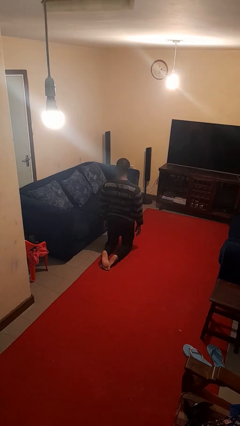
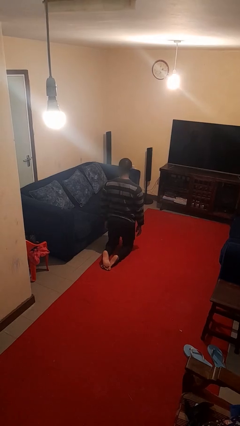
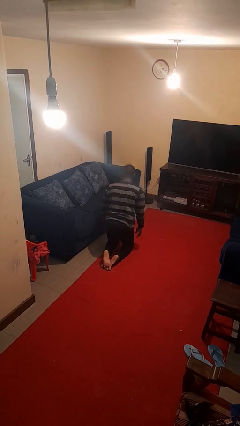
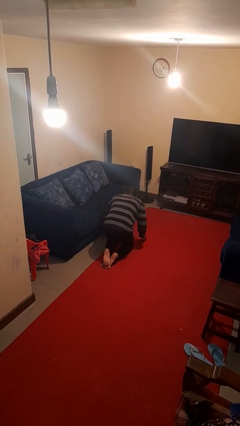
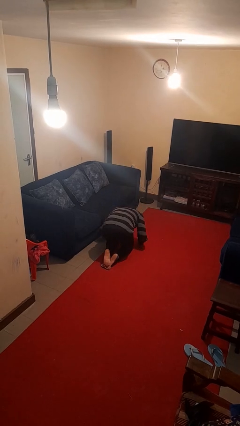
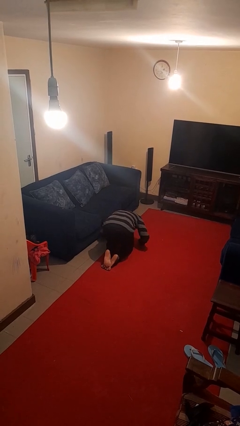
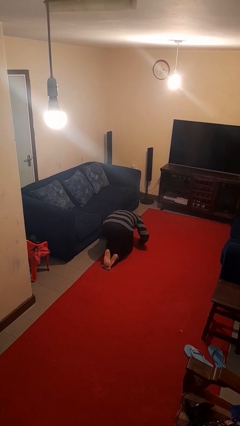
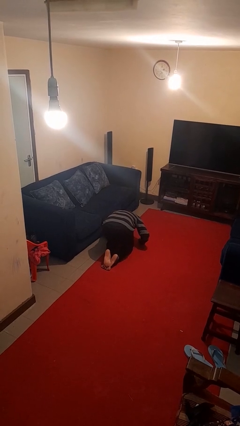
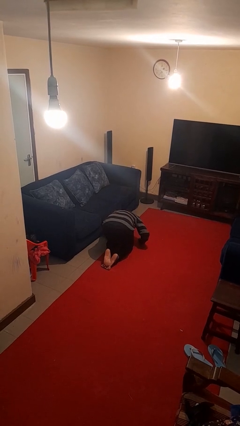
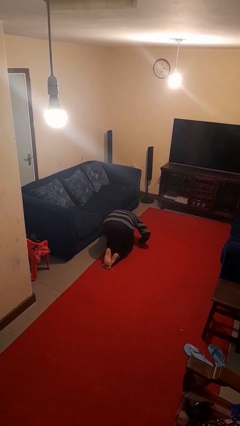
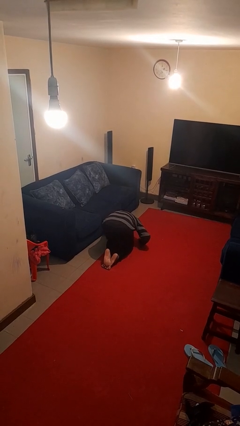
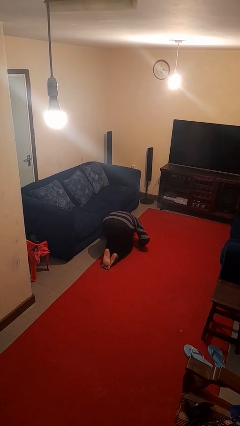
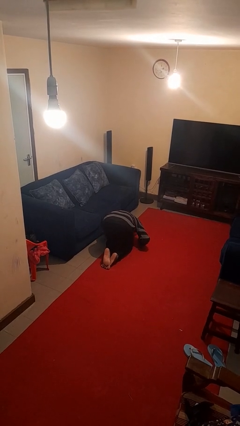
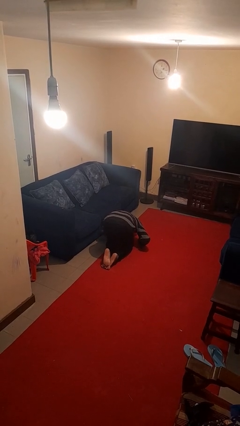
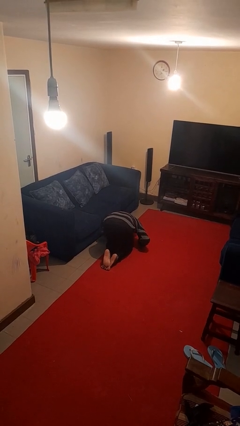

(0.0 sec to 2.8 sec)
person searches under couch

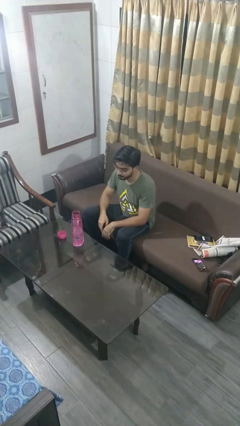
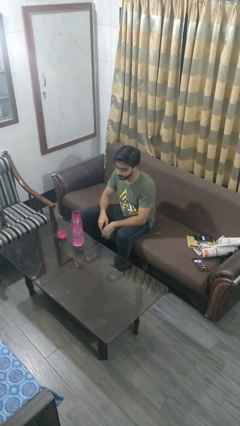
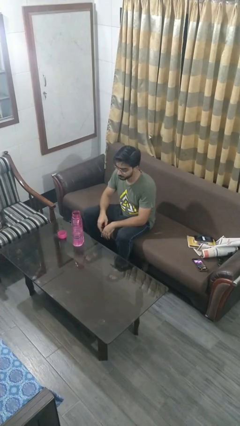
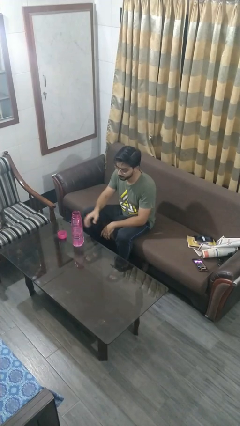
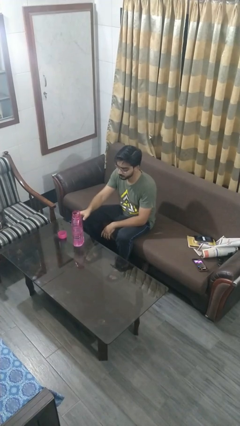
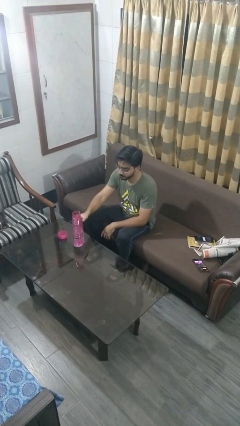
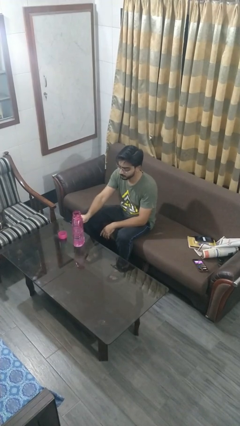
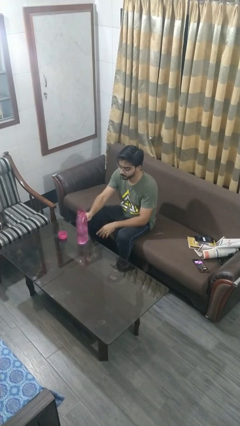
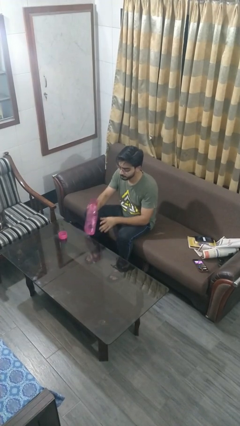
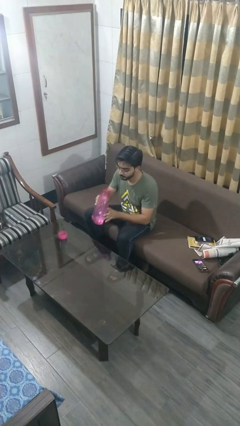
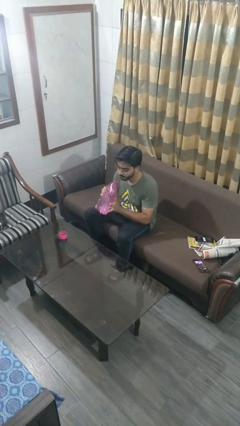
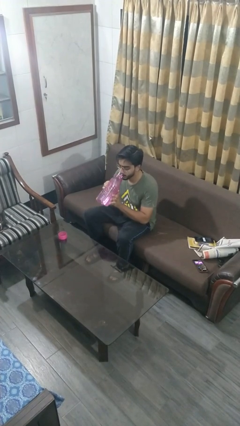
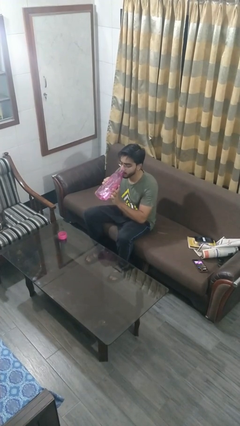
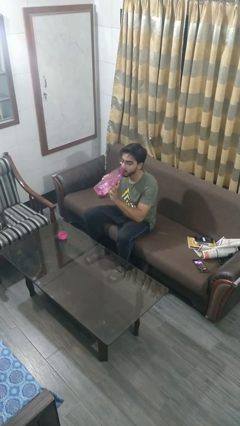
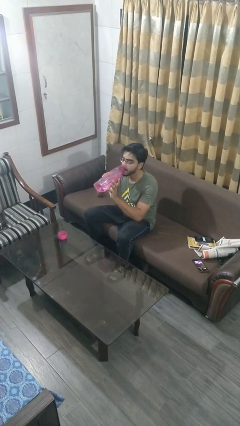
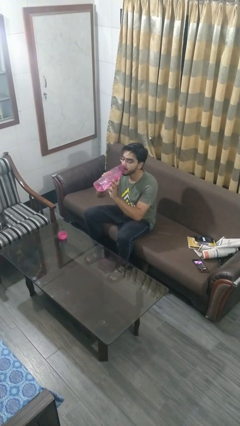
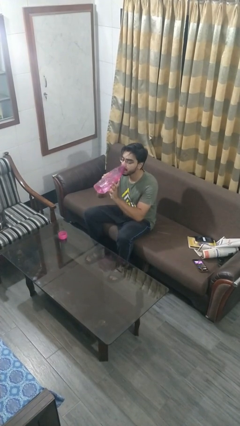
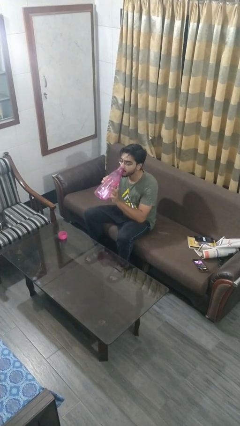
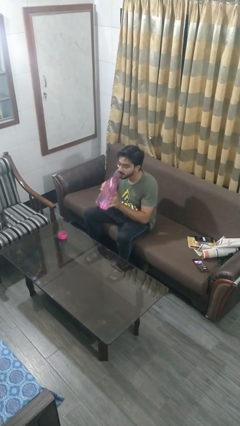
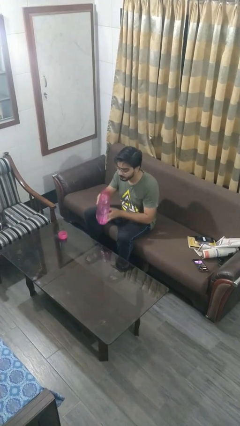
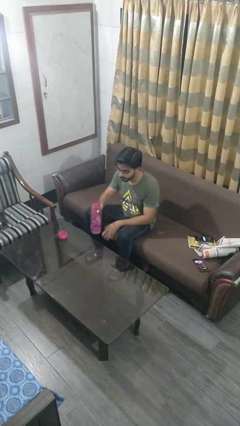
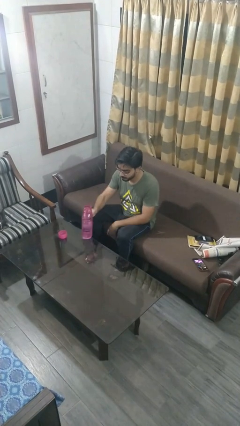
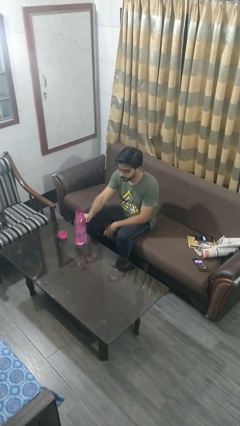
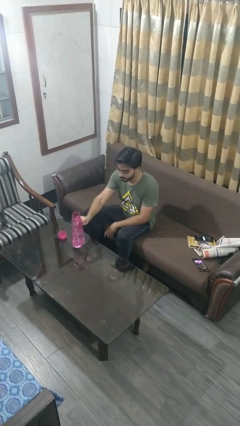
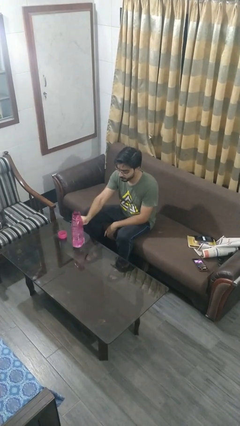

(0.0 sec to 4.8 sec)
person drinks from bottle

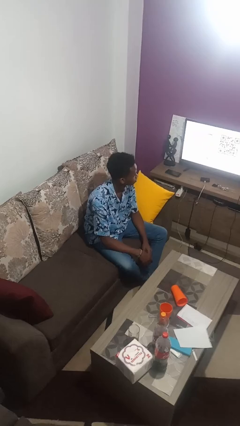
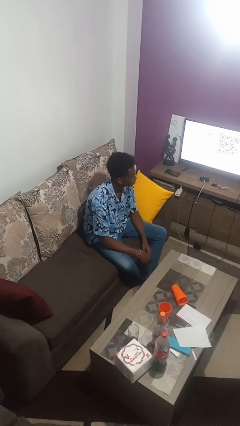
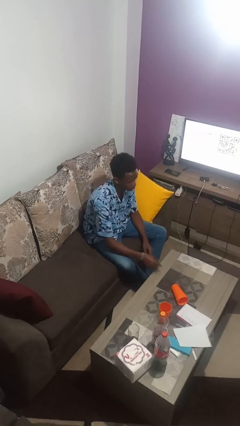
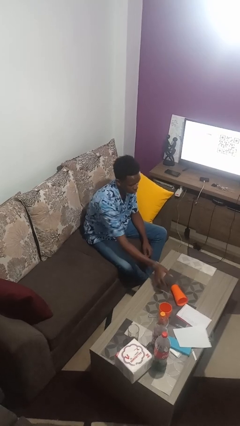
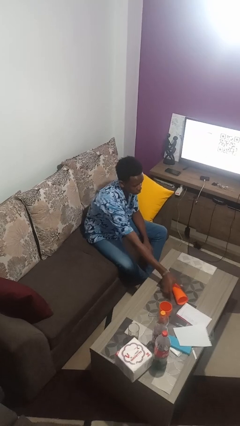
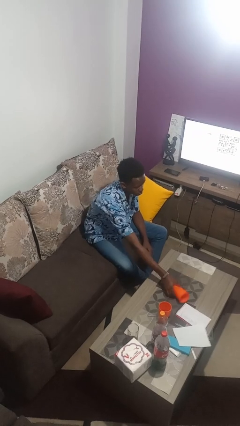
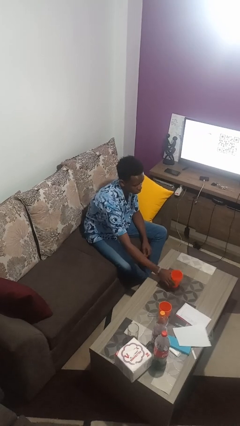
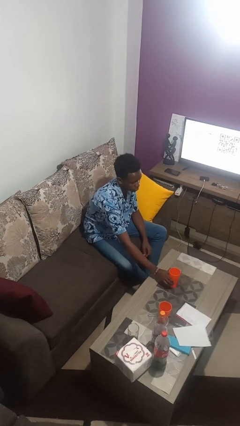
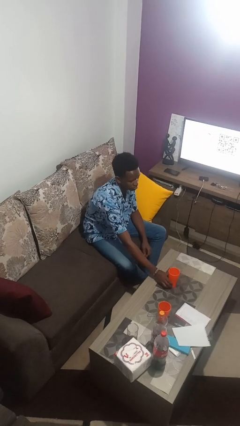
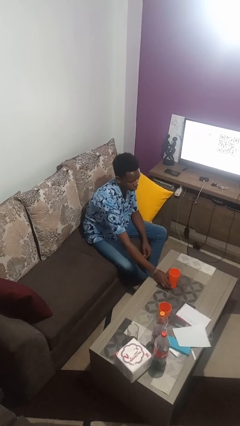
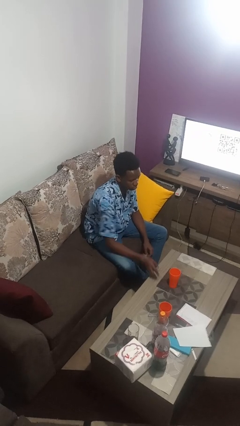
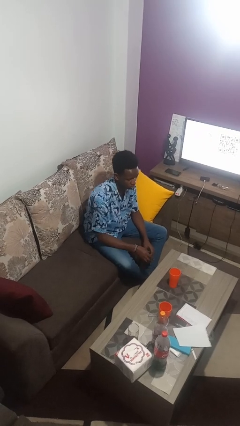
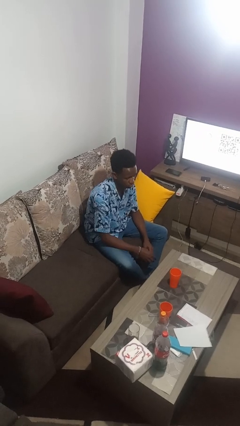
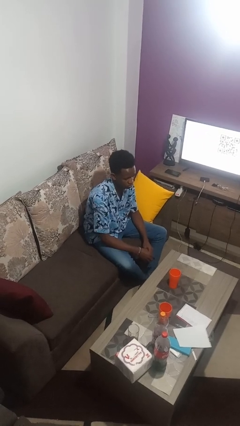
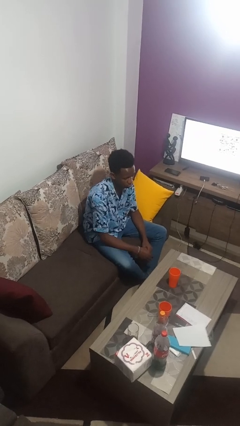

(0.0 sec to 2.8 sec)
person sets upright glass

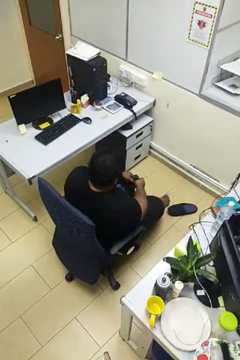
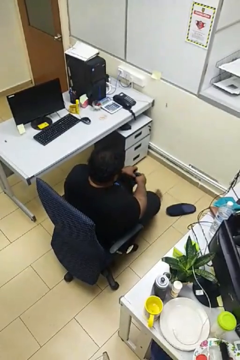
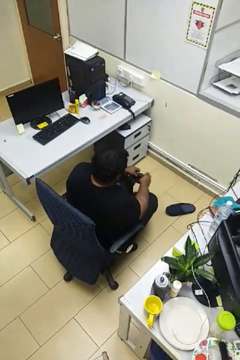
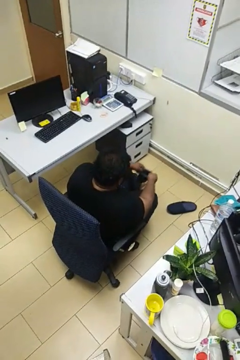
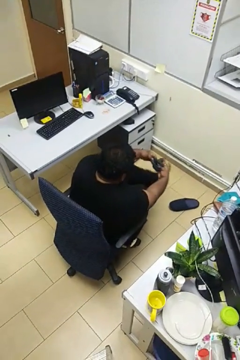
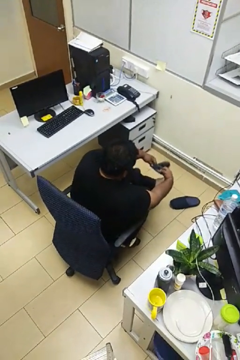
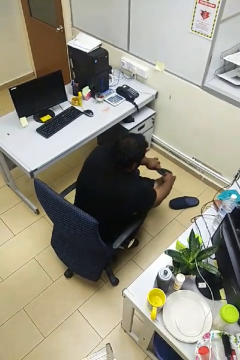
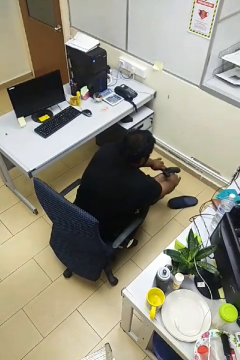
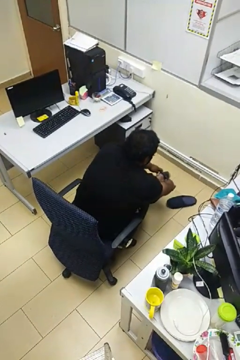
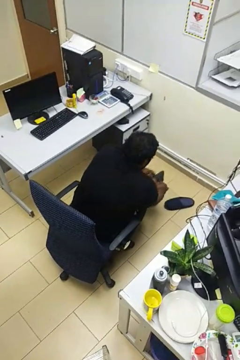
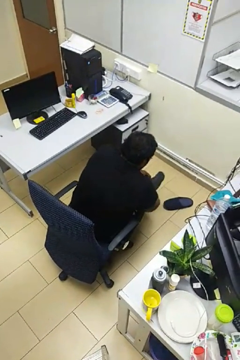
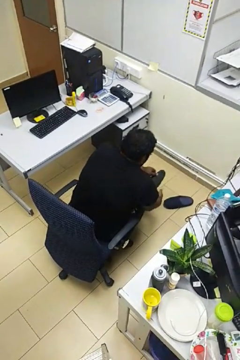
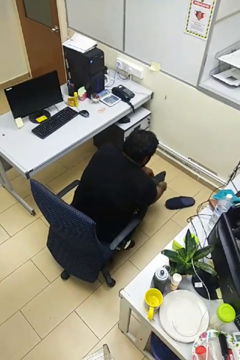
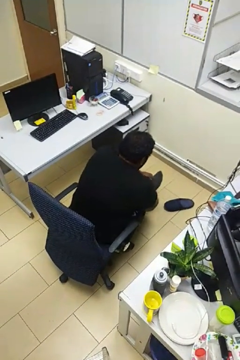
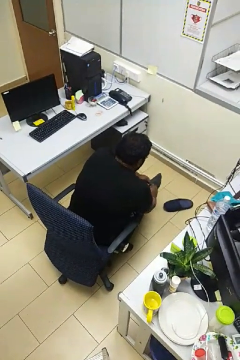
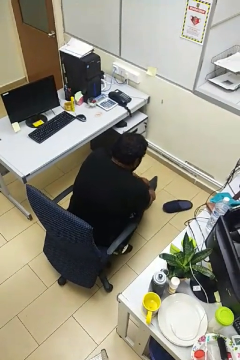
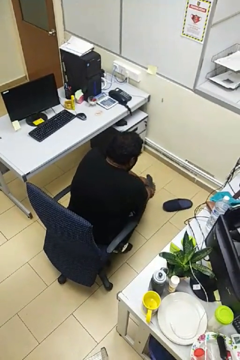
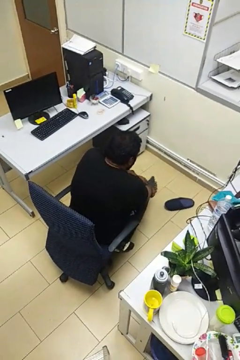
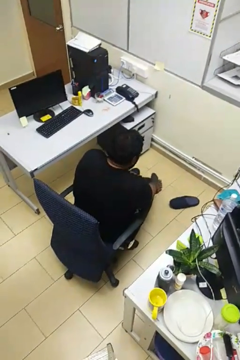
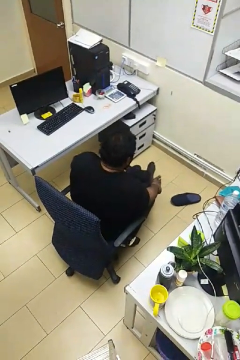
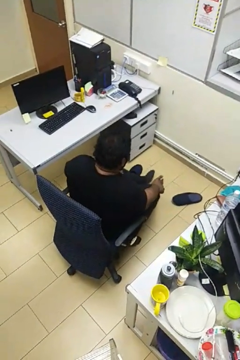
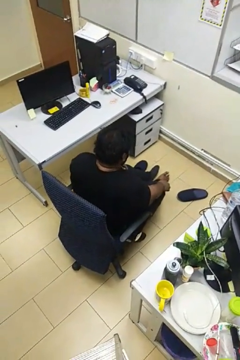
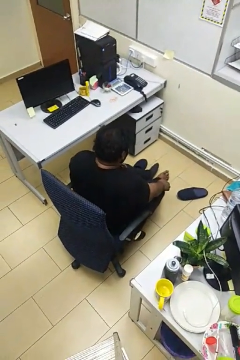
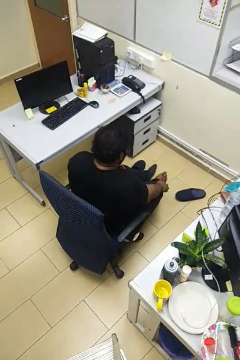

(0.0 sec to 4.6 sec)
person puts on socks

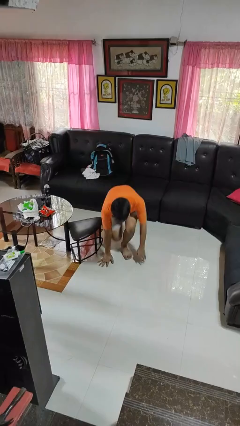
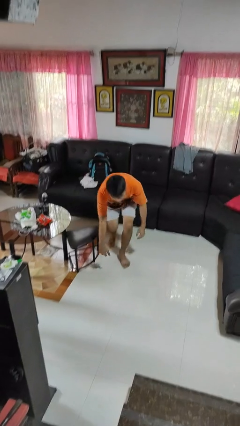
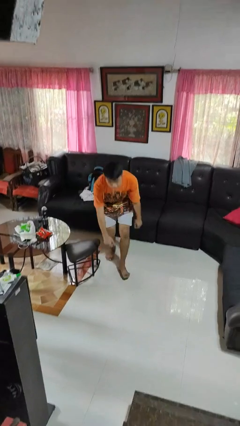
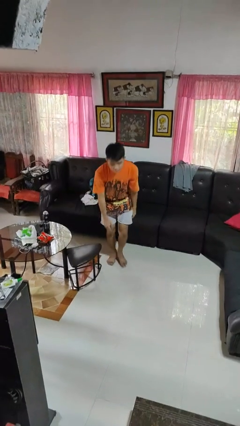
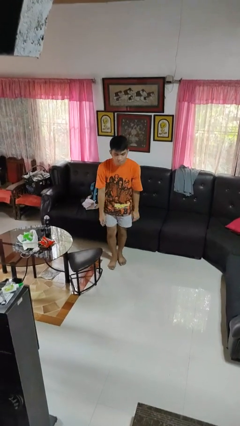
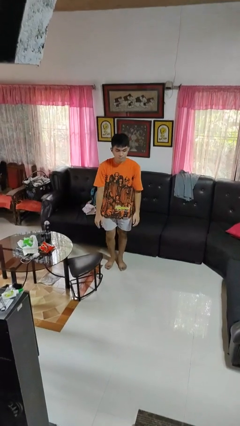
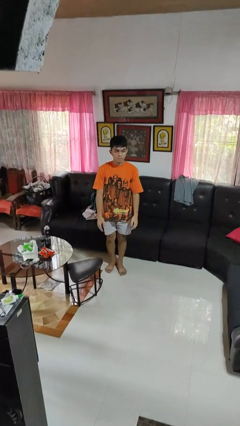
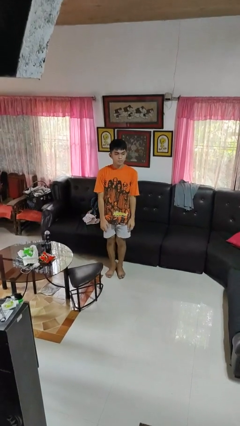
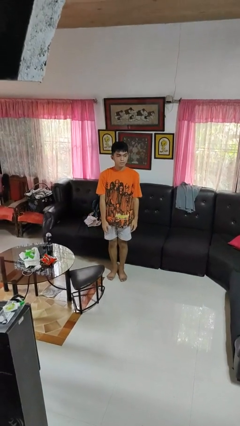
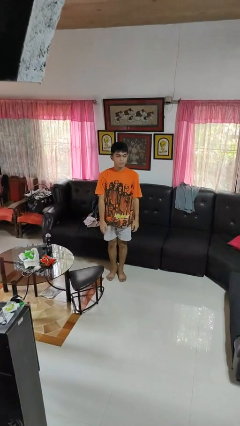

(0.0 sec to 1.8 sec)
person stands up from floor

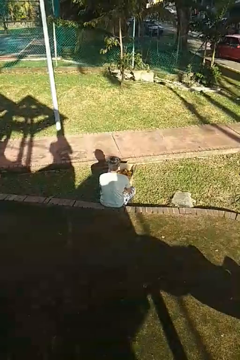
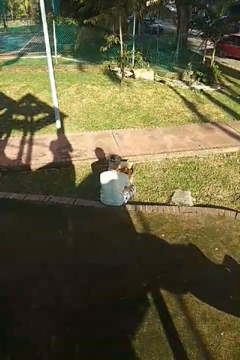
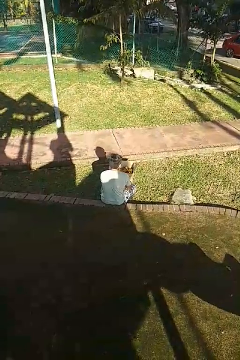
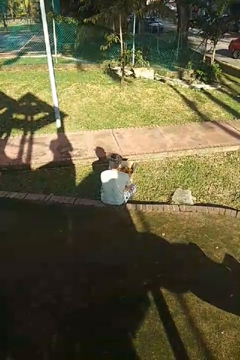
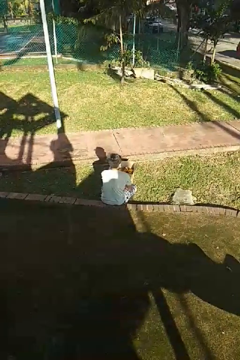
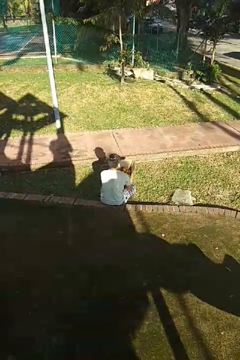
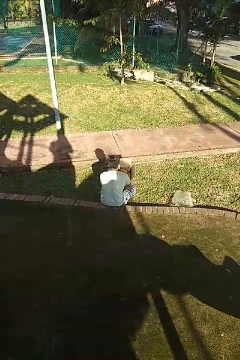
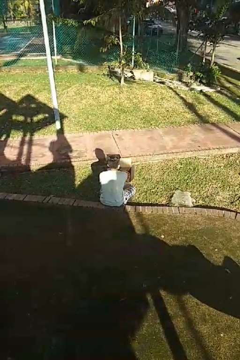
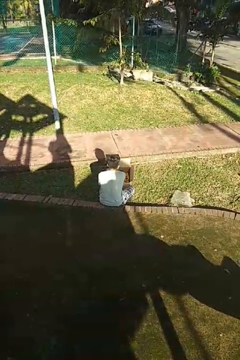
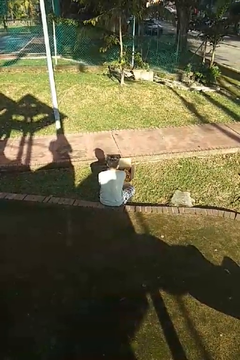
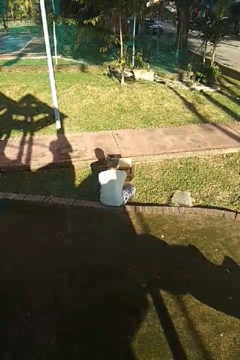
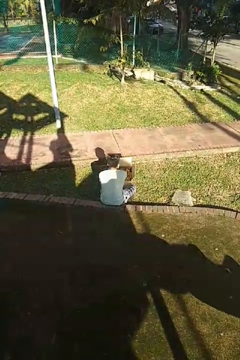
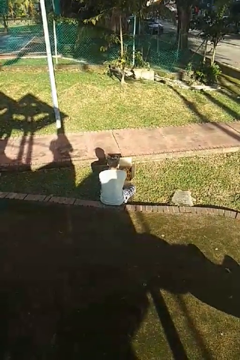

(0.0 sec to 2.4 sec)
person searches in box
